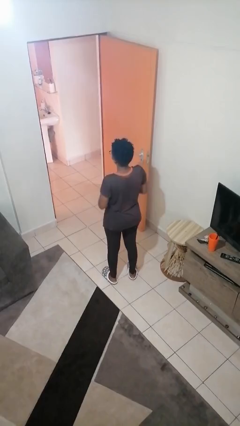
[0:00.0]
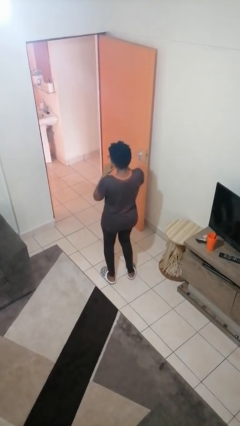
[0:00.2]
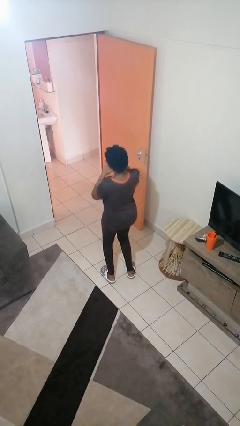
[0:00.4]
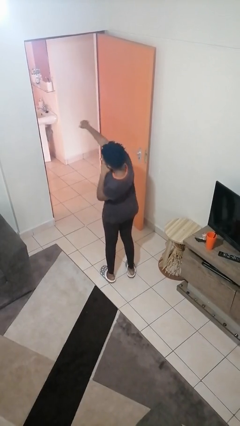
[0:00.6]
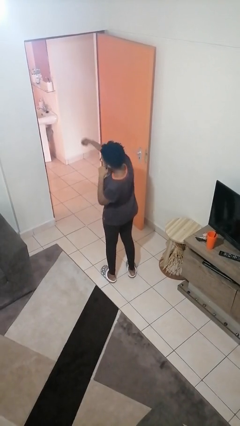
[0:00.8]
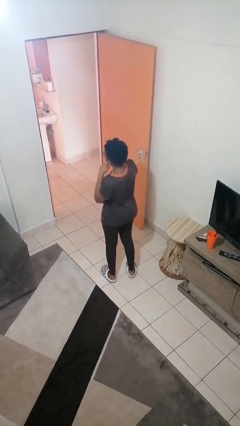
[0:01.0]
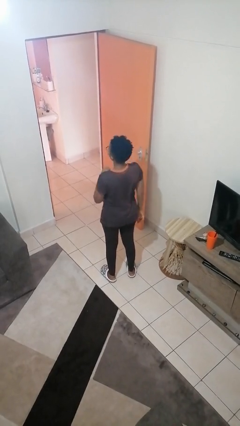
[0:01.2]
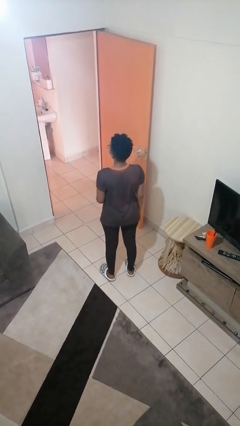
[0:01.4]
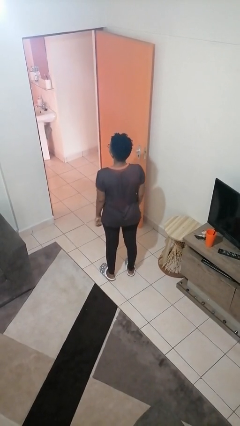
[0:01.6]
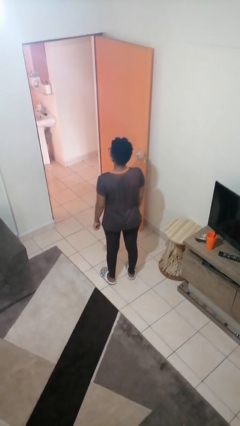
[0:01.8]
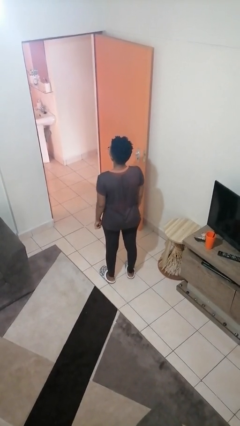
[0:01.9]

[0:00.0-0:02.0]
person punches

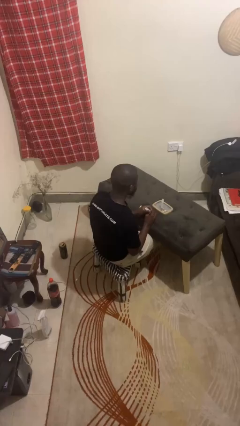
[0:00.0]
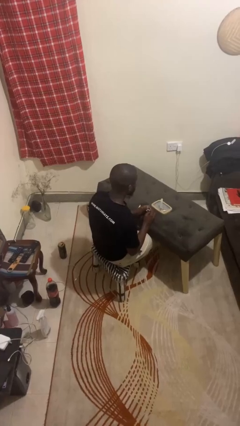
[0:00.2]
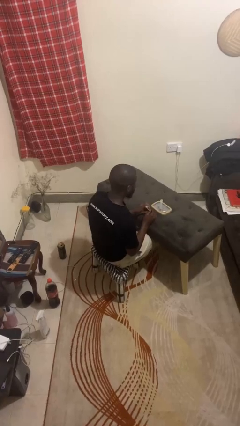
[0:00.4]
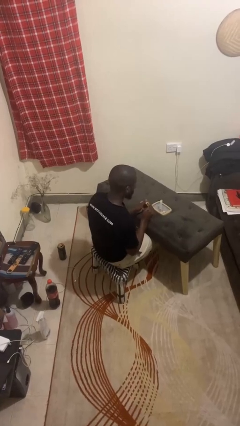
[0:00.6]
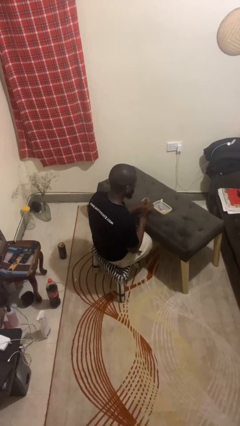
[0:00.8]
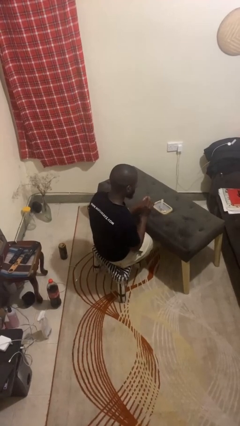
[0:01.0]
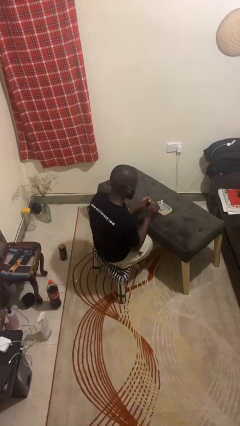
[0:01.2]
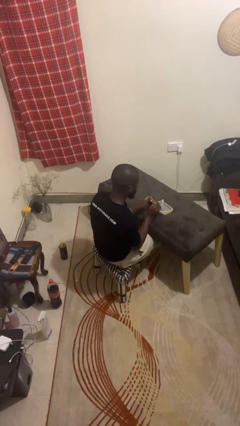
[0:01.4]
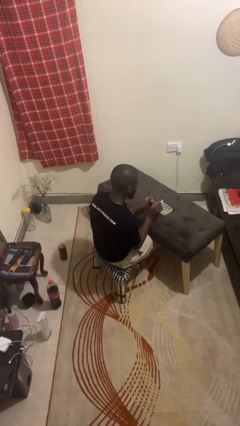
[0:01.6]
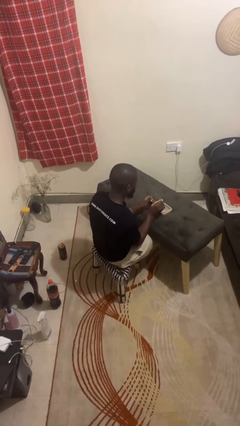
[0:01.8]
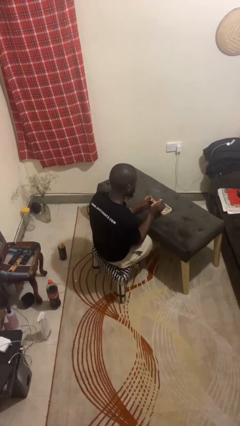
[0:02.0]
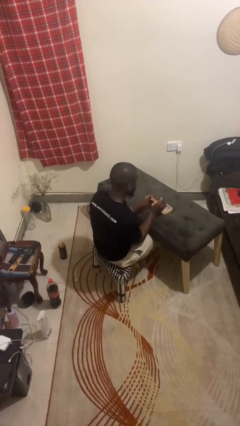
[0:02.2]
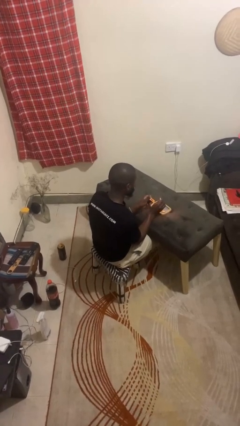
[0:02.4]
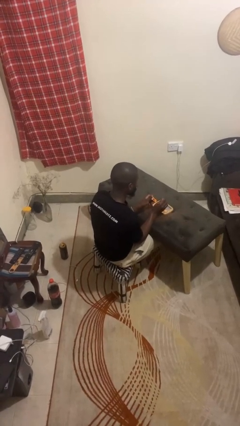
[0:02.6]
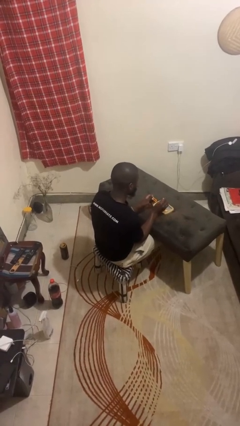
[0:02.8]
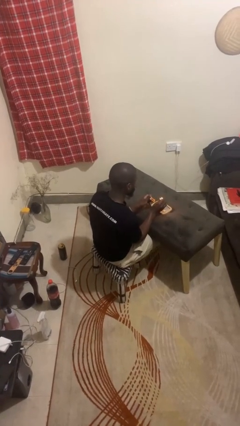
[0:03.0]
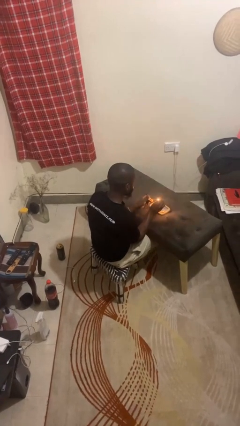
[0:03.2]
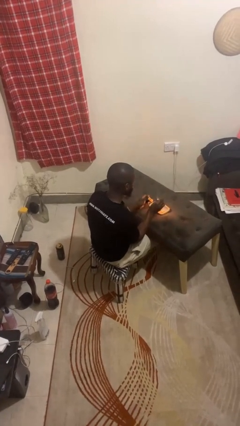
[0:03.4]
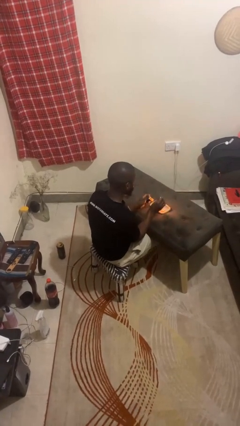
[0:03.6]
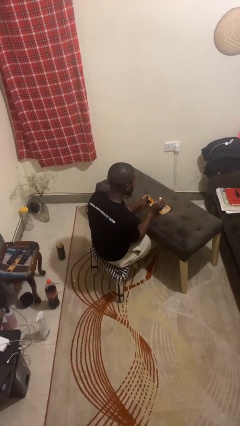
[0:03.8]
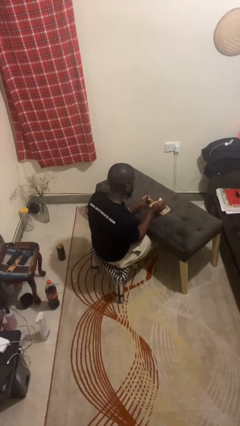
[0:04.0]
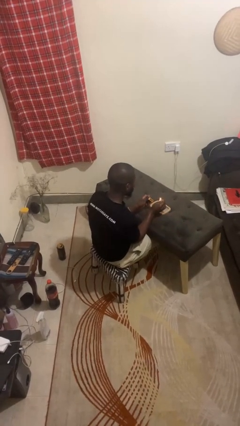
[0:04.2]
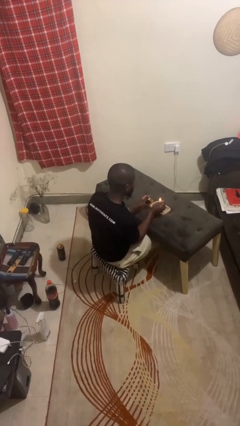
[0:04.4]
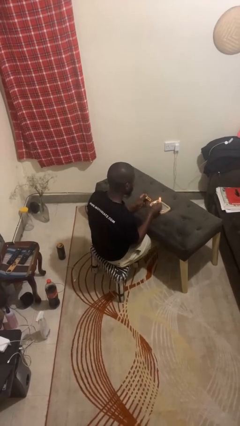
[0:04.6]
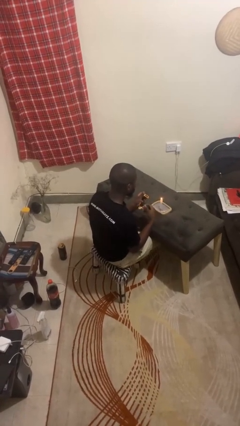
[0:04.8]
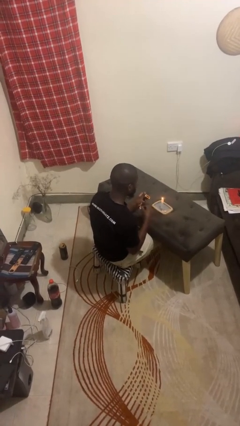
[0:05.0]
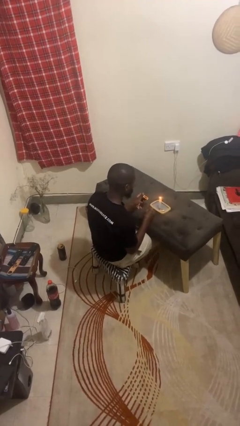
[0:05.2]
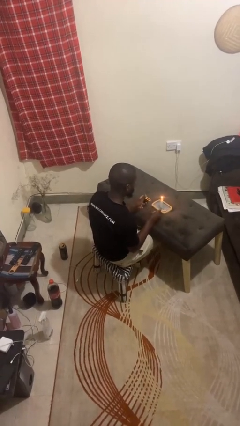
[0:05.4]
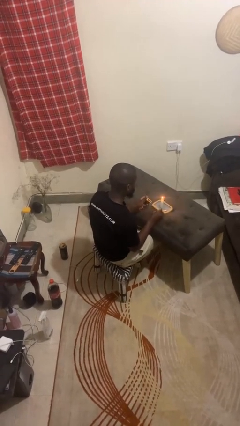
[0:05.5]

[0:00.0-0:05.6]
person lights candle

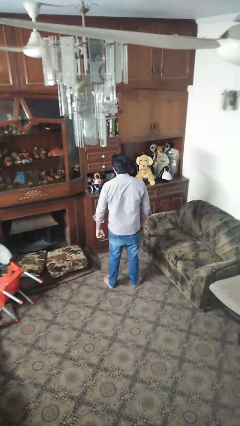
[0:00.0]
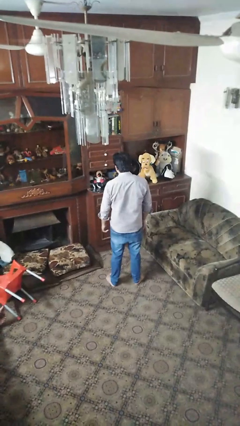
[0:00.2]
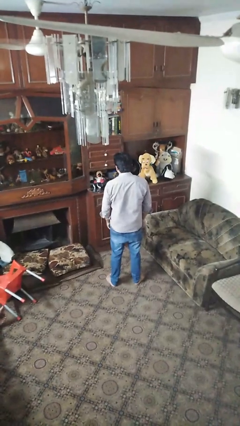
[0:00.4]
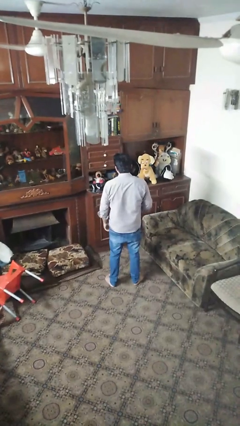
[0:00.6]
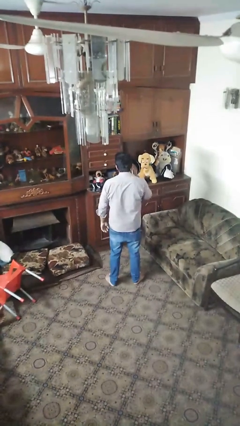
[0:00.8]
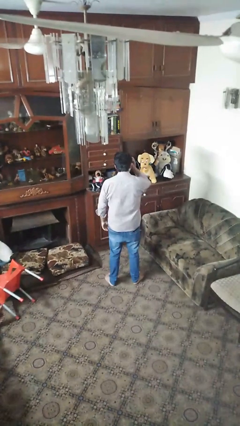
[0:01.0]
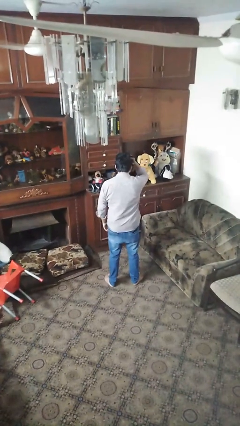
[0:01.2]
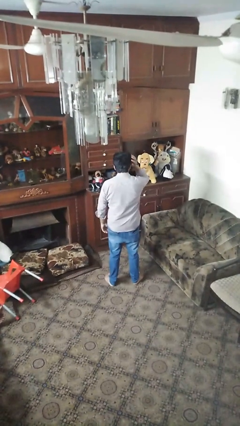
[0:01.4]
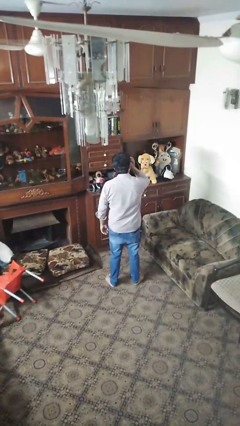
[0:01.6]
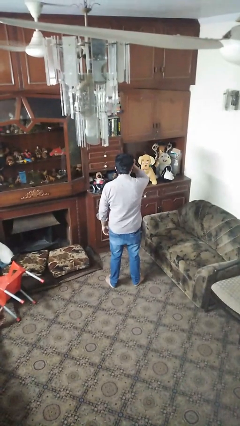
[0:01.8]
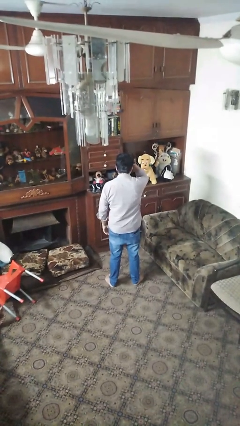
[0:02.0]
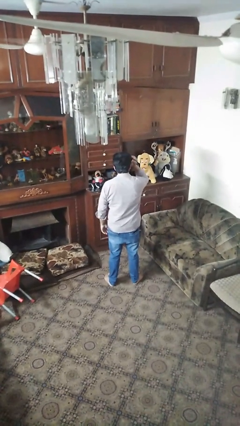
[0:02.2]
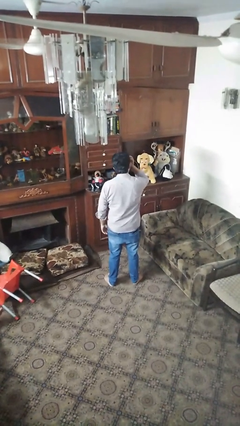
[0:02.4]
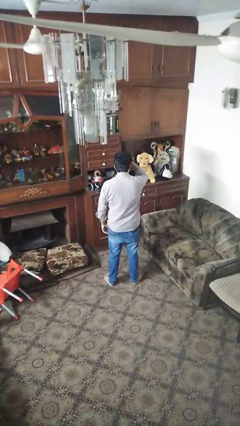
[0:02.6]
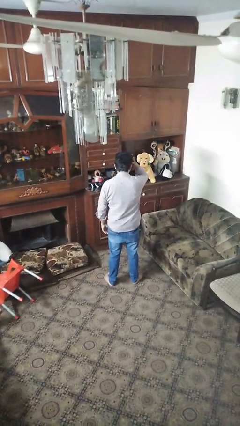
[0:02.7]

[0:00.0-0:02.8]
person strokes hair

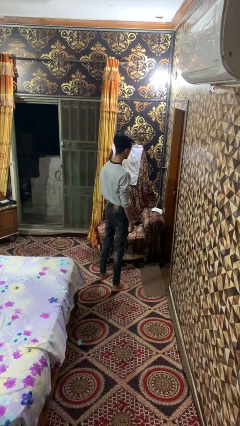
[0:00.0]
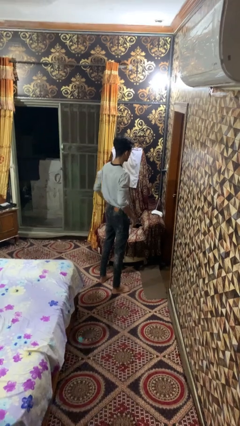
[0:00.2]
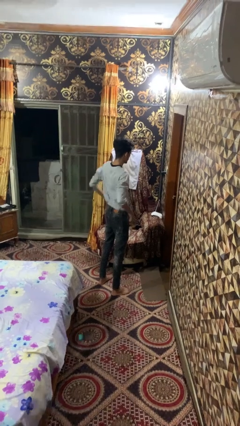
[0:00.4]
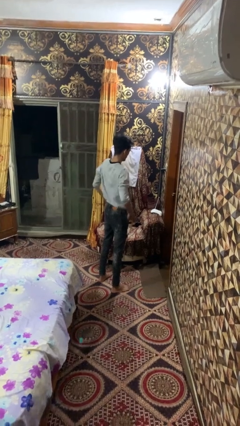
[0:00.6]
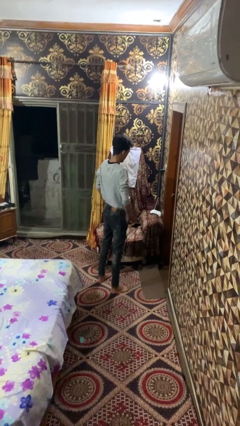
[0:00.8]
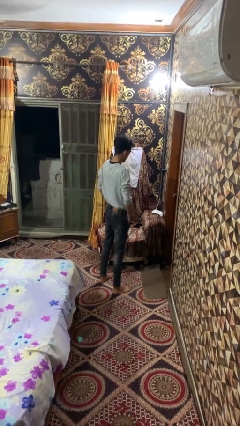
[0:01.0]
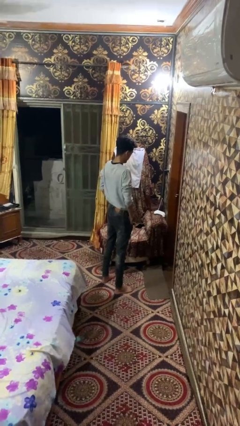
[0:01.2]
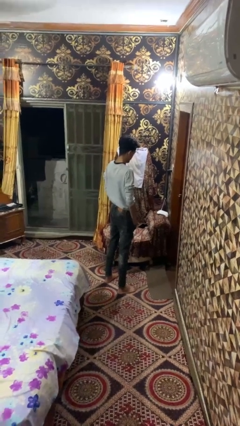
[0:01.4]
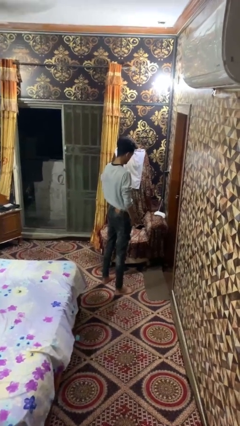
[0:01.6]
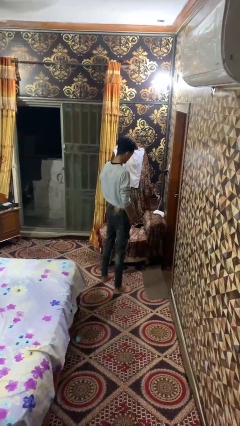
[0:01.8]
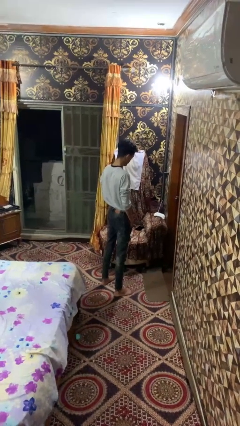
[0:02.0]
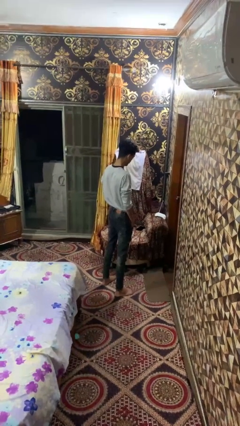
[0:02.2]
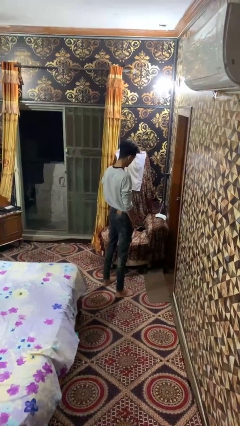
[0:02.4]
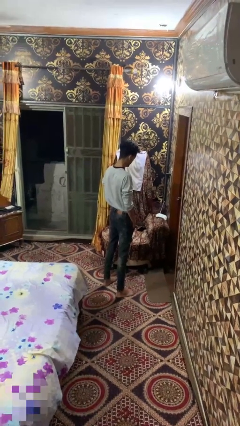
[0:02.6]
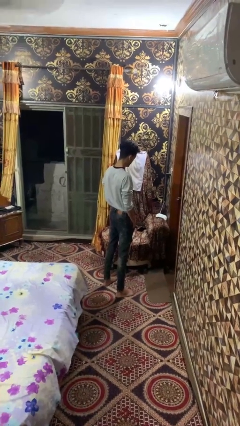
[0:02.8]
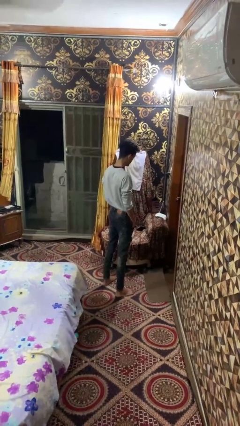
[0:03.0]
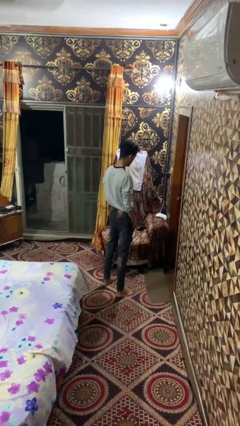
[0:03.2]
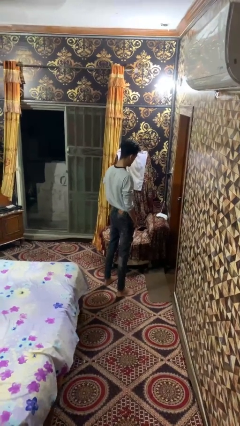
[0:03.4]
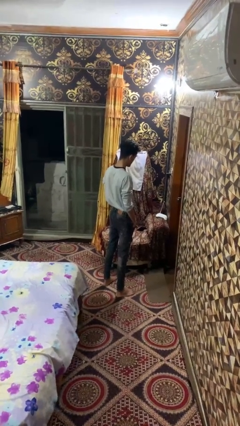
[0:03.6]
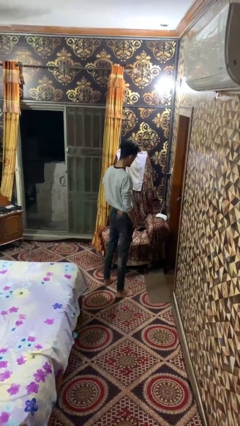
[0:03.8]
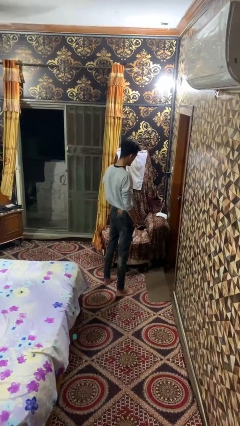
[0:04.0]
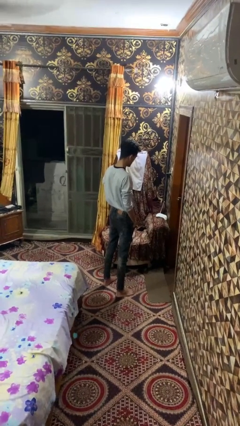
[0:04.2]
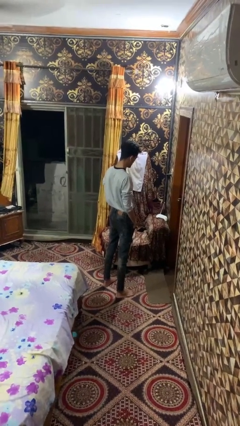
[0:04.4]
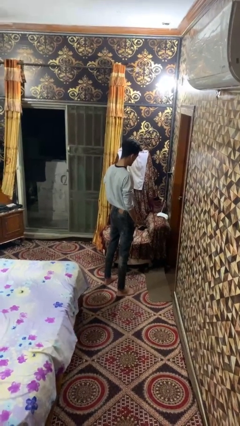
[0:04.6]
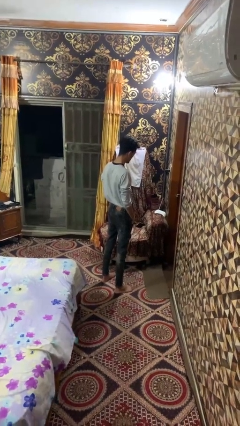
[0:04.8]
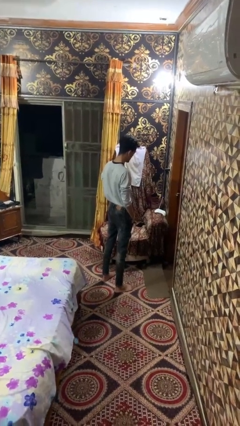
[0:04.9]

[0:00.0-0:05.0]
person puts hands in back pockets

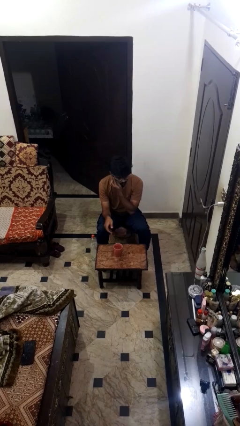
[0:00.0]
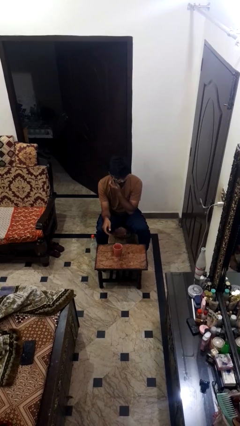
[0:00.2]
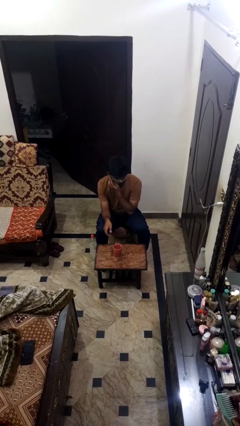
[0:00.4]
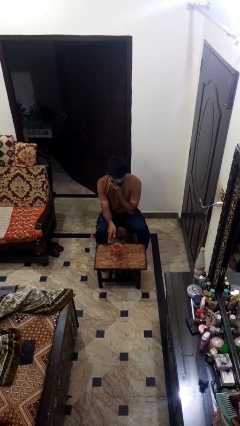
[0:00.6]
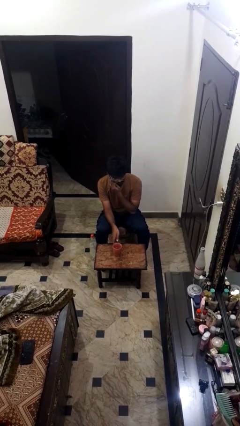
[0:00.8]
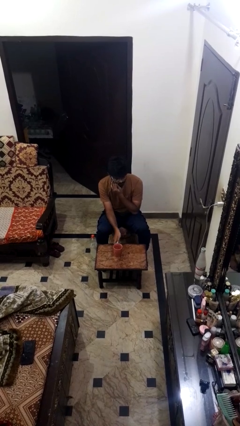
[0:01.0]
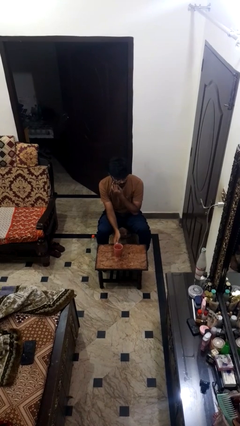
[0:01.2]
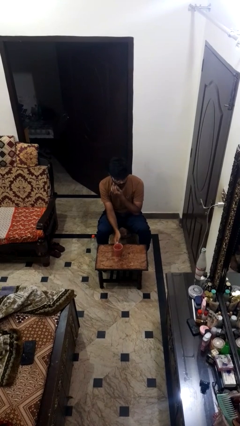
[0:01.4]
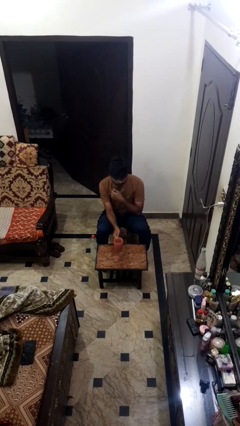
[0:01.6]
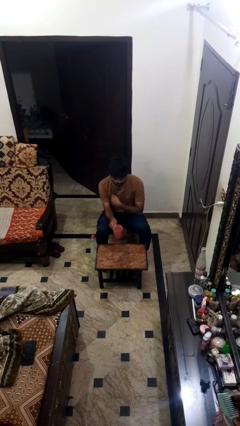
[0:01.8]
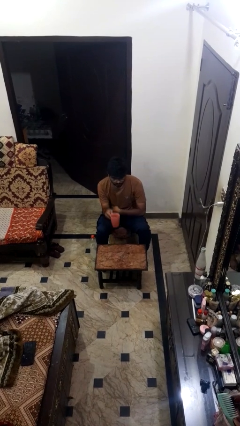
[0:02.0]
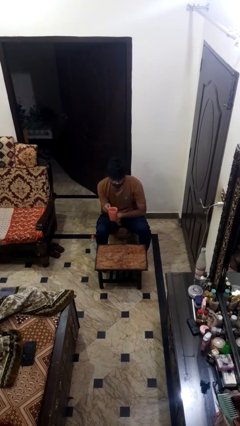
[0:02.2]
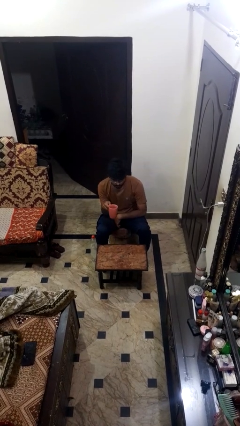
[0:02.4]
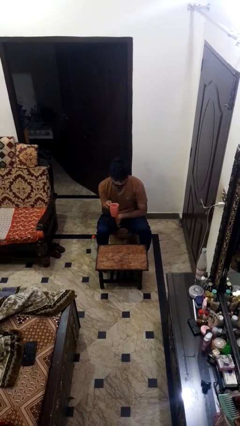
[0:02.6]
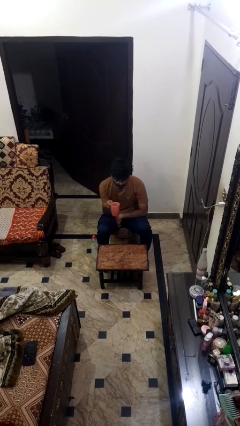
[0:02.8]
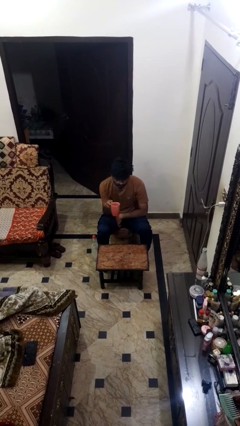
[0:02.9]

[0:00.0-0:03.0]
person picks up object from table
